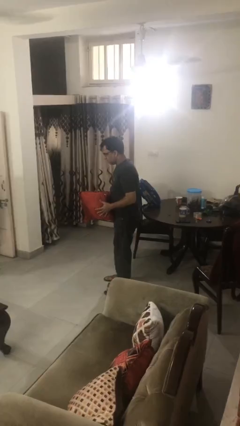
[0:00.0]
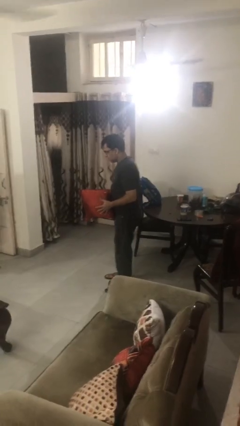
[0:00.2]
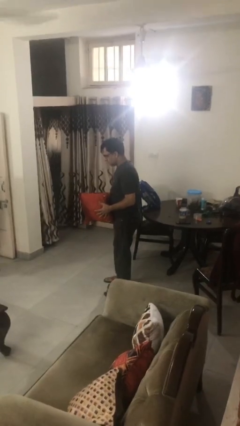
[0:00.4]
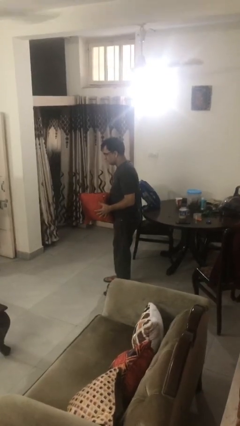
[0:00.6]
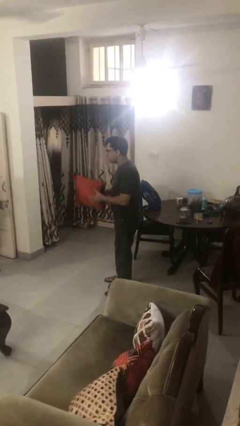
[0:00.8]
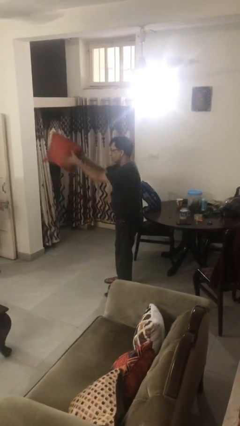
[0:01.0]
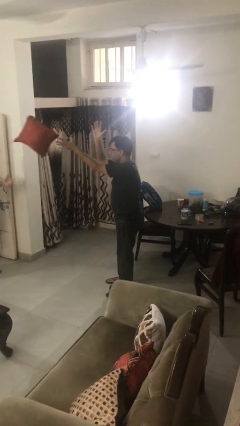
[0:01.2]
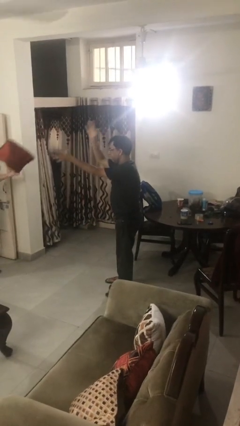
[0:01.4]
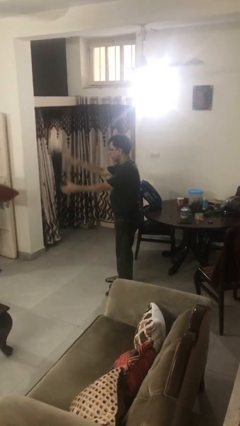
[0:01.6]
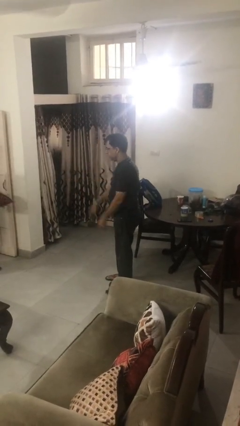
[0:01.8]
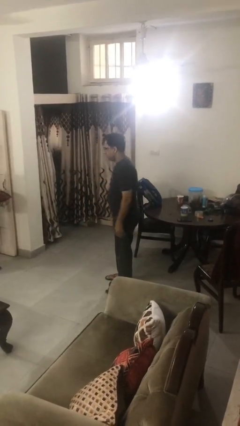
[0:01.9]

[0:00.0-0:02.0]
person throws object to person

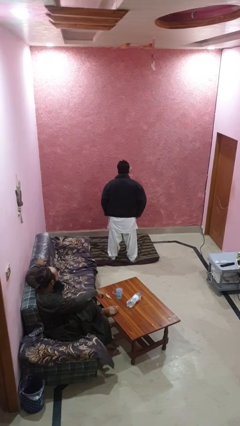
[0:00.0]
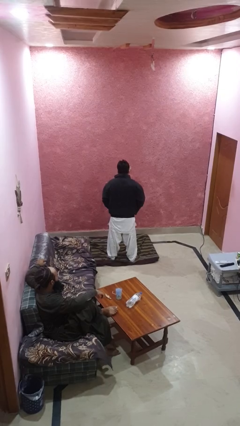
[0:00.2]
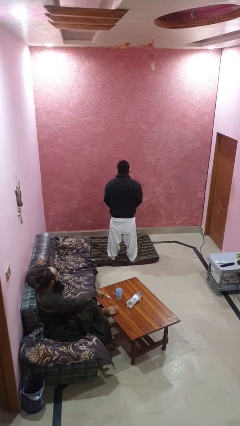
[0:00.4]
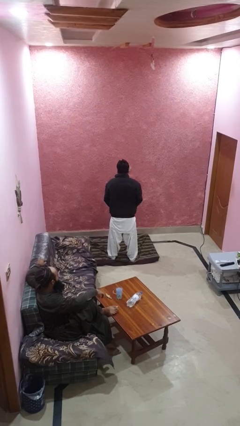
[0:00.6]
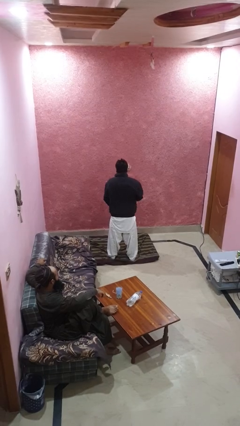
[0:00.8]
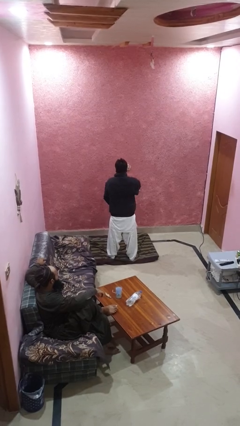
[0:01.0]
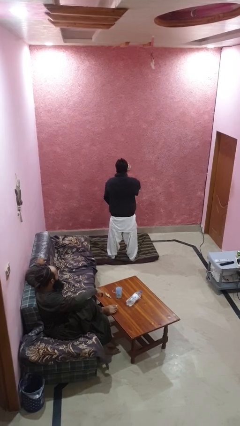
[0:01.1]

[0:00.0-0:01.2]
person zips up jacket

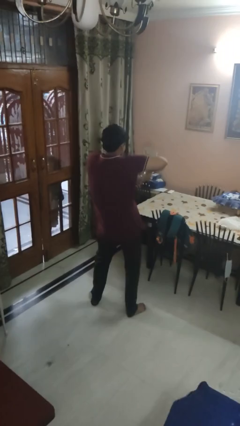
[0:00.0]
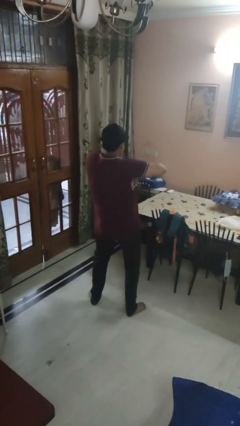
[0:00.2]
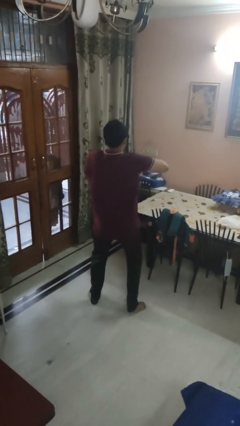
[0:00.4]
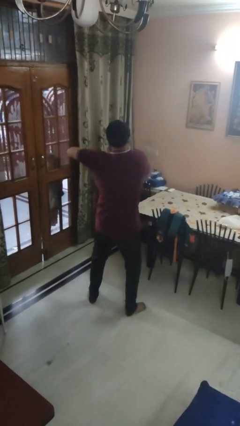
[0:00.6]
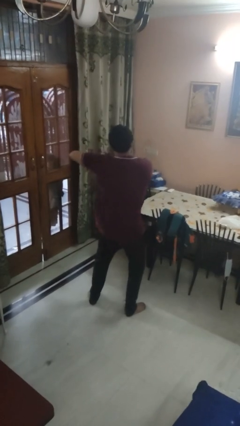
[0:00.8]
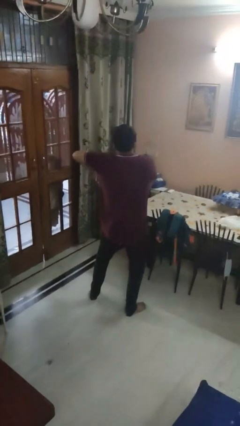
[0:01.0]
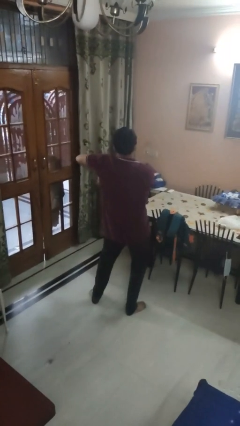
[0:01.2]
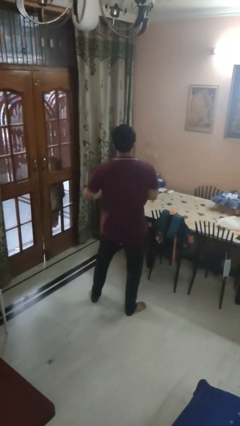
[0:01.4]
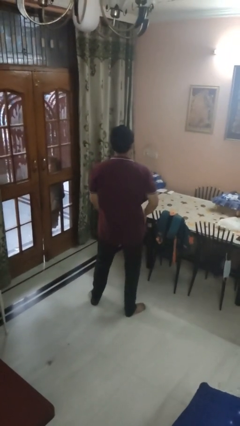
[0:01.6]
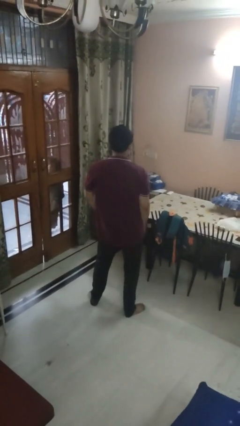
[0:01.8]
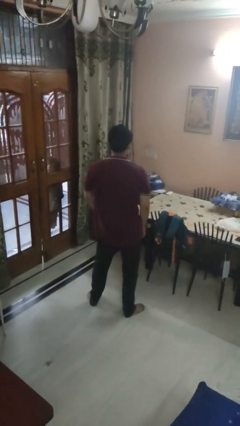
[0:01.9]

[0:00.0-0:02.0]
person dances in place

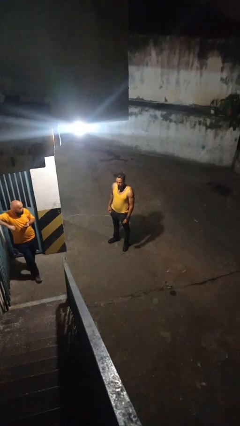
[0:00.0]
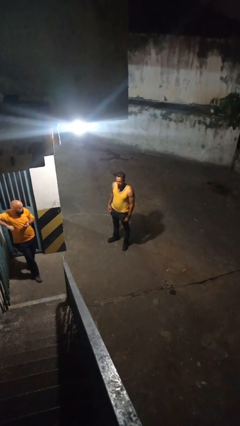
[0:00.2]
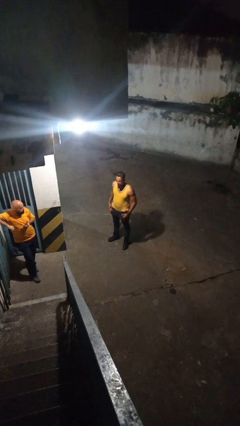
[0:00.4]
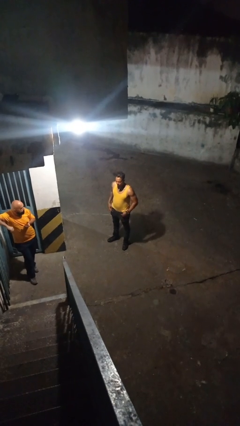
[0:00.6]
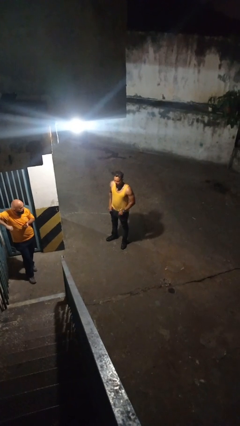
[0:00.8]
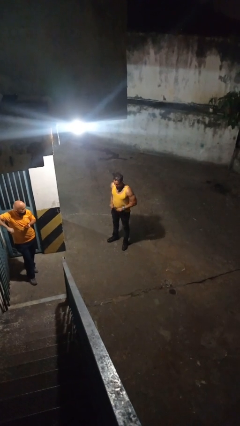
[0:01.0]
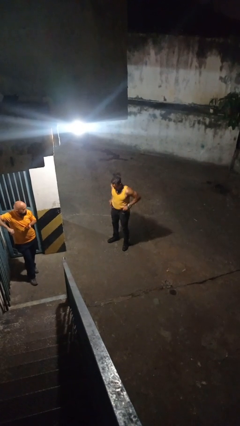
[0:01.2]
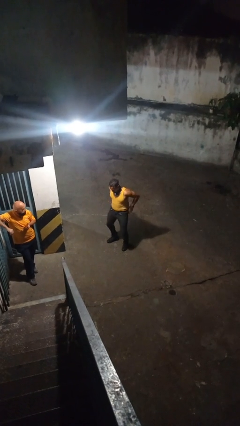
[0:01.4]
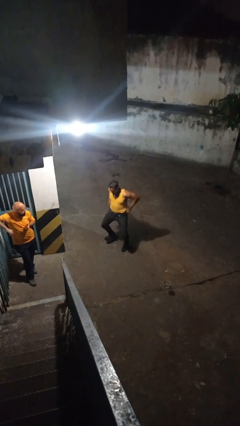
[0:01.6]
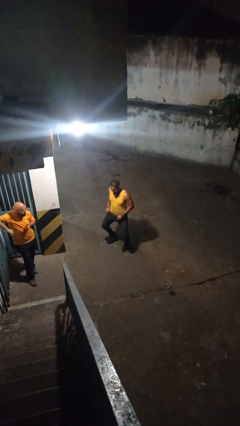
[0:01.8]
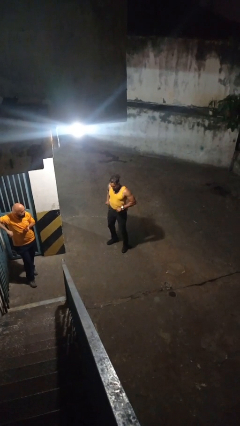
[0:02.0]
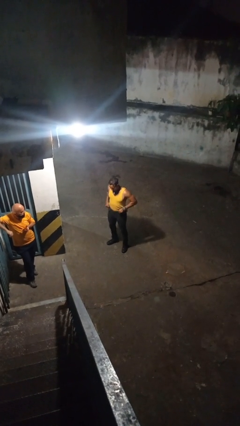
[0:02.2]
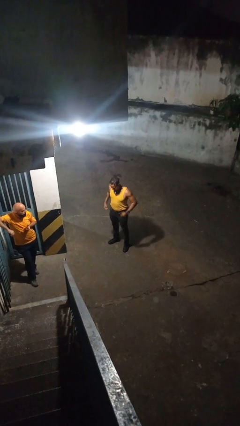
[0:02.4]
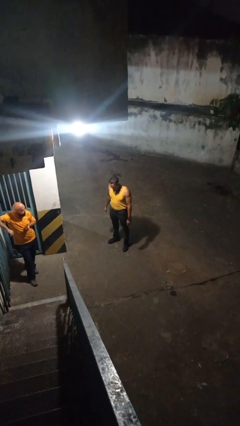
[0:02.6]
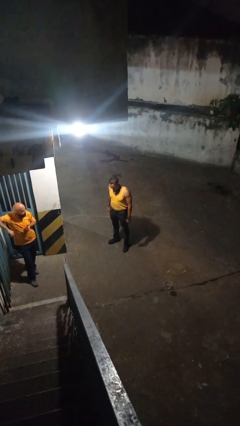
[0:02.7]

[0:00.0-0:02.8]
person hikes up pants

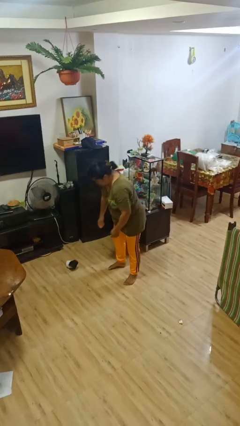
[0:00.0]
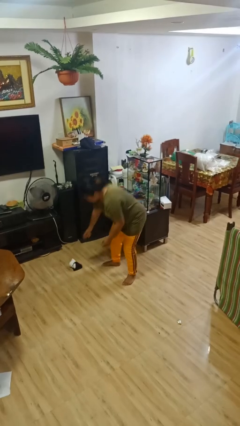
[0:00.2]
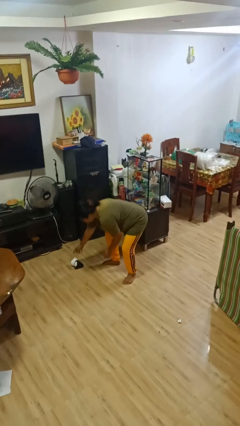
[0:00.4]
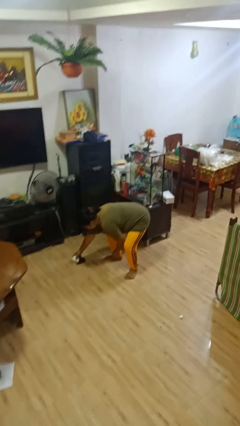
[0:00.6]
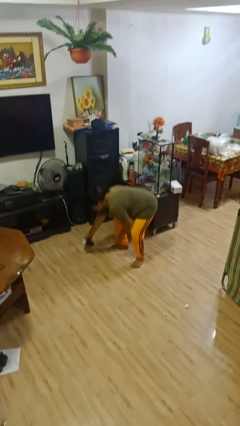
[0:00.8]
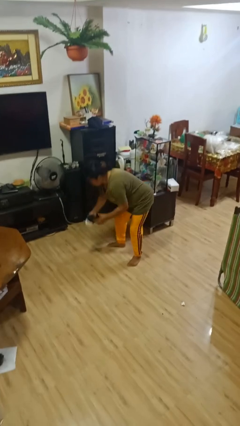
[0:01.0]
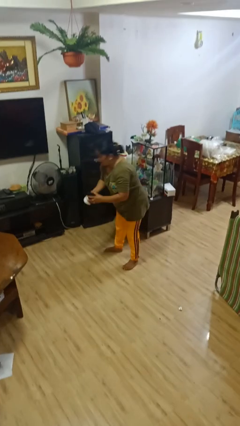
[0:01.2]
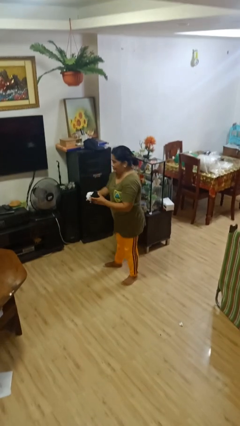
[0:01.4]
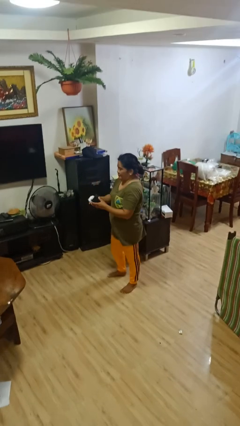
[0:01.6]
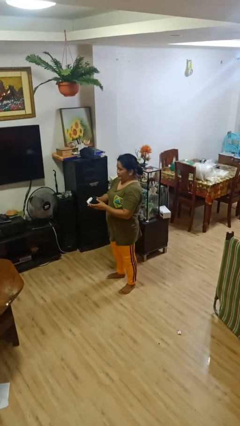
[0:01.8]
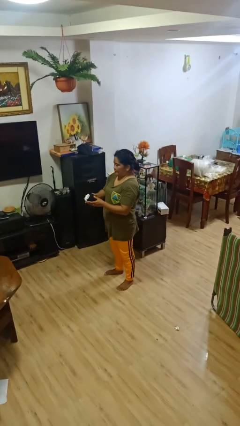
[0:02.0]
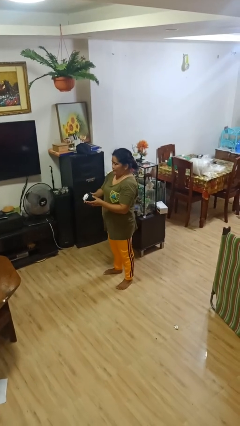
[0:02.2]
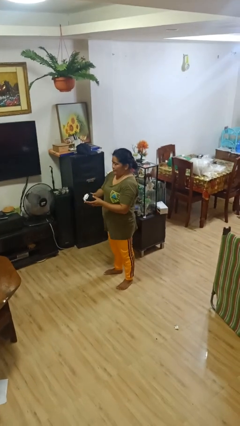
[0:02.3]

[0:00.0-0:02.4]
person picks up object from floor

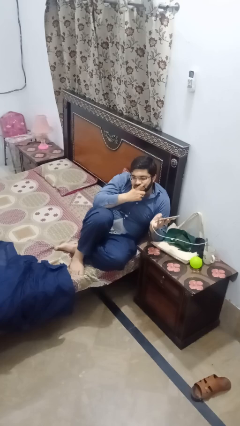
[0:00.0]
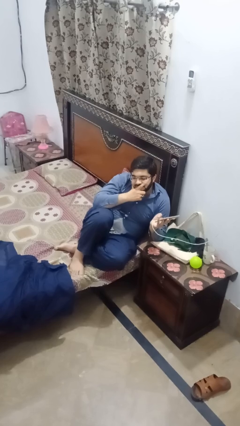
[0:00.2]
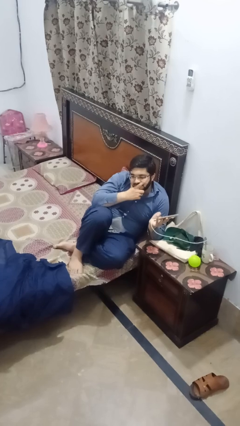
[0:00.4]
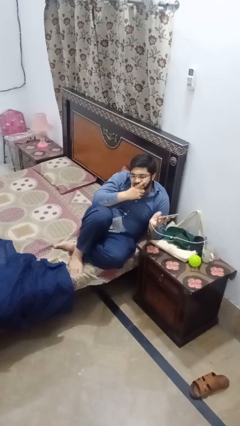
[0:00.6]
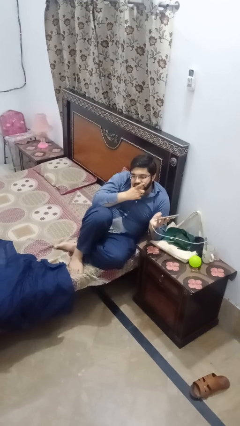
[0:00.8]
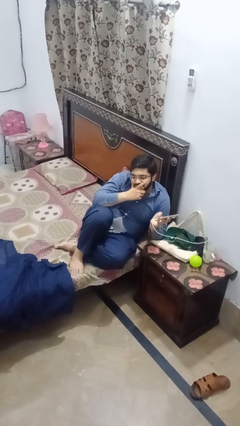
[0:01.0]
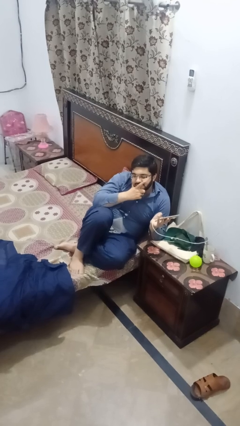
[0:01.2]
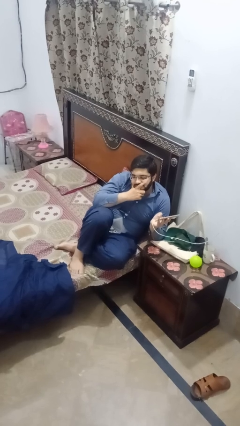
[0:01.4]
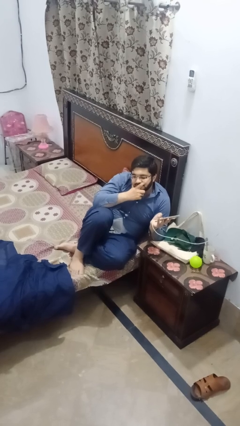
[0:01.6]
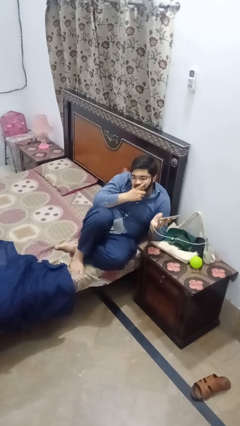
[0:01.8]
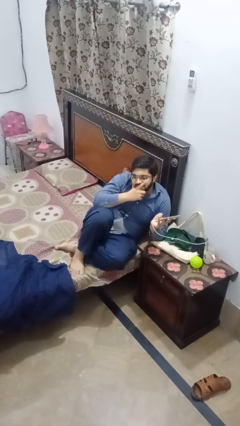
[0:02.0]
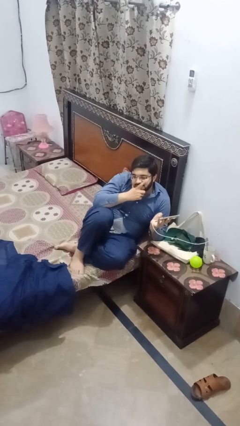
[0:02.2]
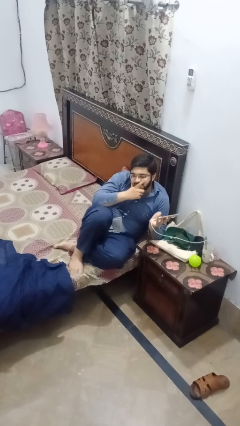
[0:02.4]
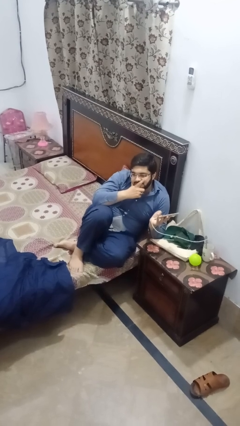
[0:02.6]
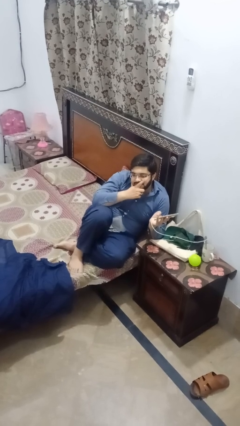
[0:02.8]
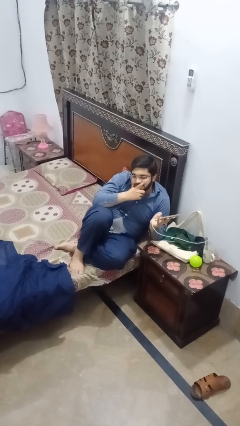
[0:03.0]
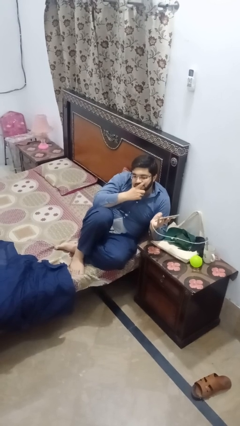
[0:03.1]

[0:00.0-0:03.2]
person strokes chin

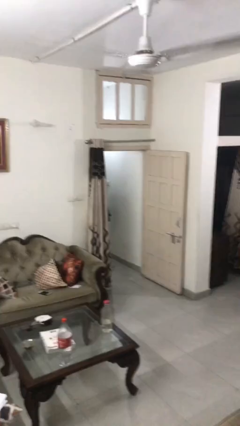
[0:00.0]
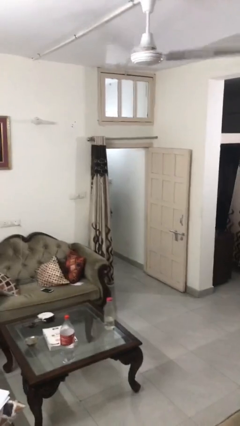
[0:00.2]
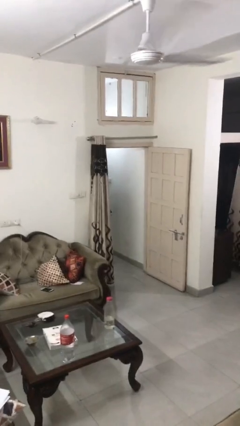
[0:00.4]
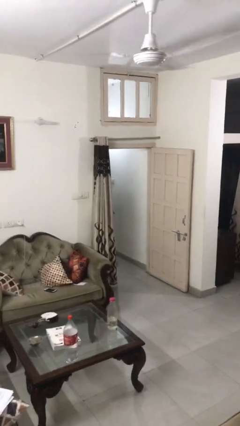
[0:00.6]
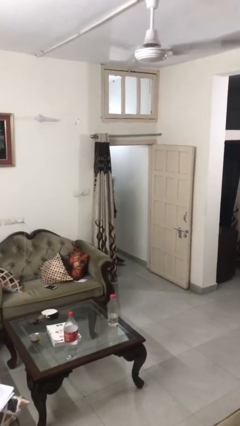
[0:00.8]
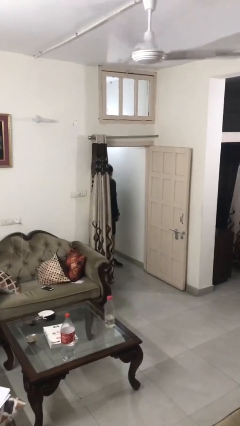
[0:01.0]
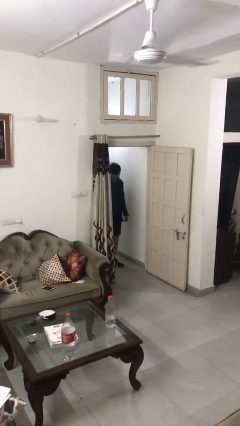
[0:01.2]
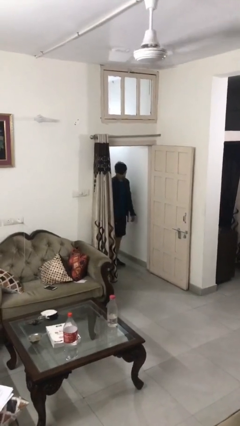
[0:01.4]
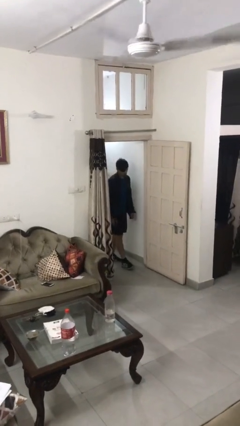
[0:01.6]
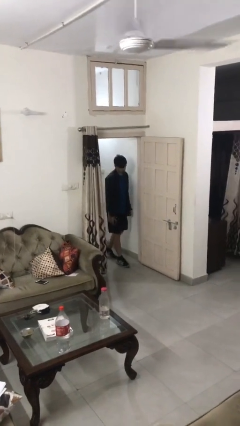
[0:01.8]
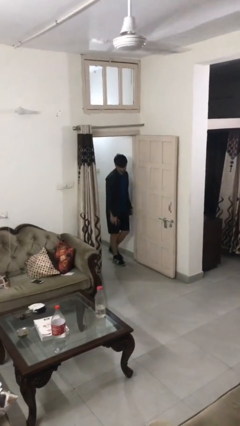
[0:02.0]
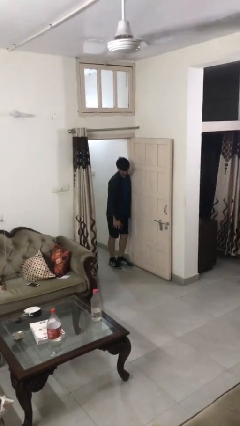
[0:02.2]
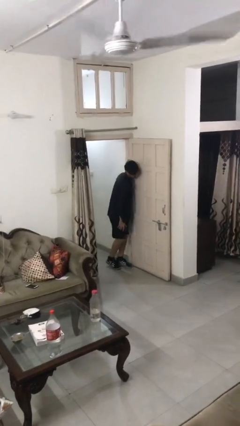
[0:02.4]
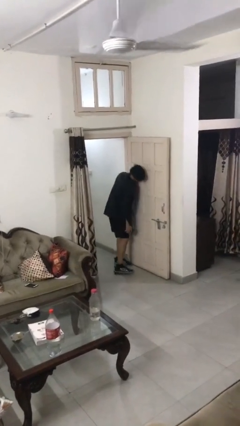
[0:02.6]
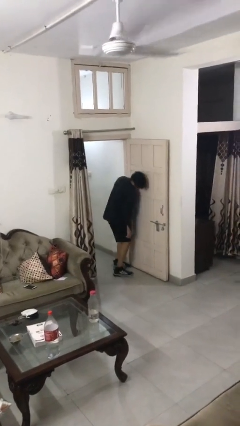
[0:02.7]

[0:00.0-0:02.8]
person bumps into wall

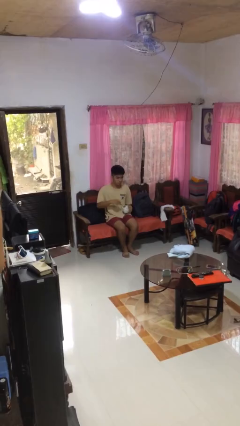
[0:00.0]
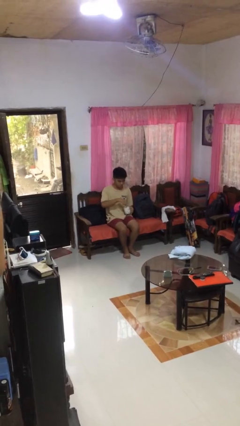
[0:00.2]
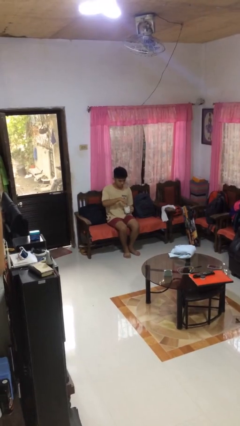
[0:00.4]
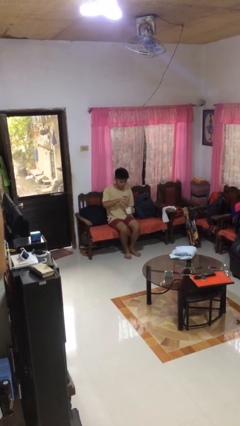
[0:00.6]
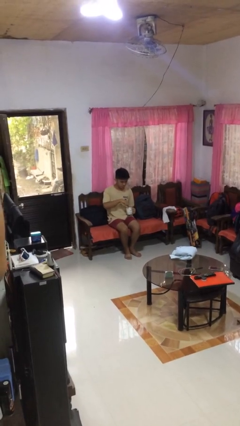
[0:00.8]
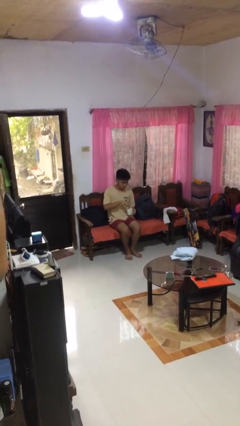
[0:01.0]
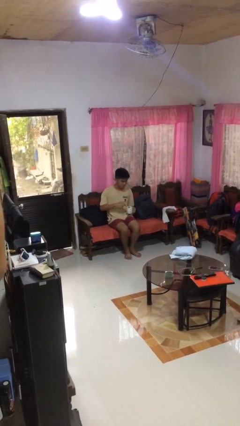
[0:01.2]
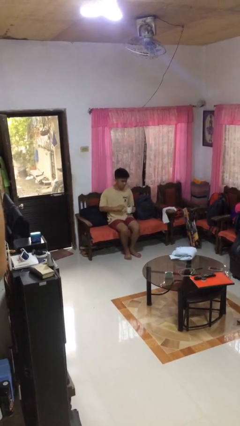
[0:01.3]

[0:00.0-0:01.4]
person stirs mug
